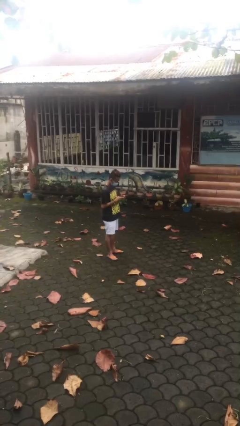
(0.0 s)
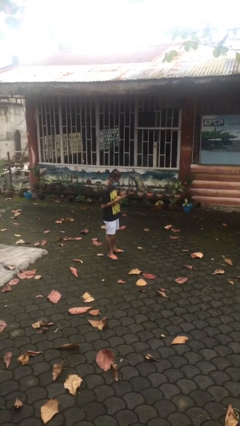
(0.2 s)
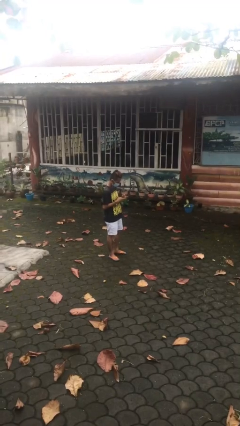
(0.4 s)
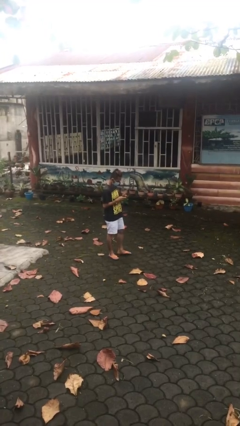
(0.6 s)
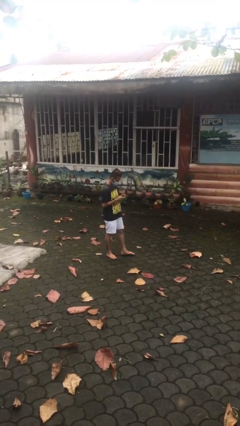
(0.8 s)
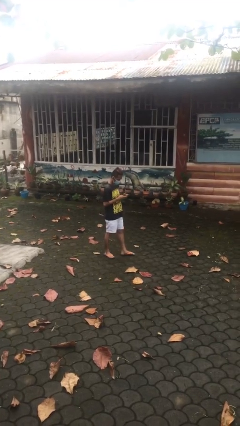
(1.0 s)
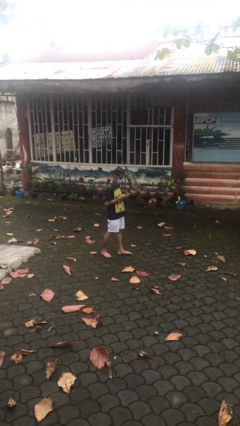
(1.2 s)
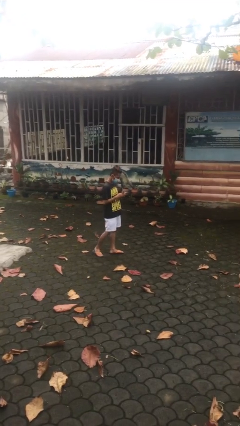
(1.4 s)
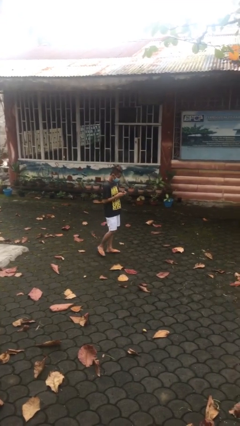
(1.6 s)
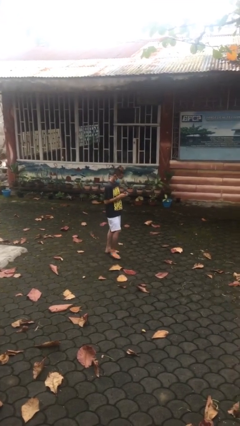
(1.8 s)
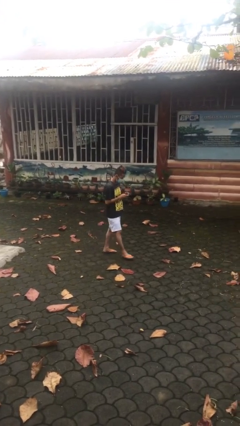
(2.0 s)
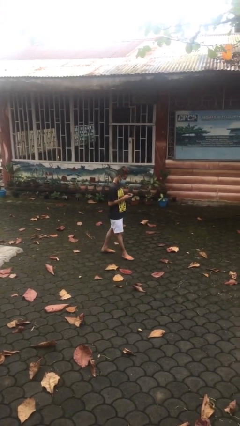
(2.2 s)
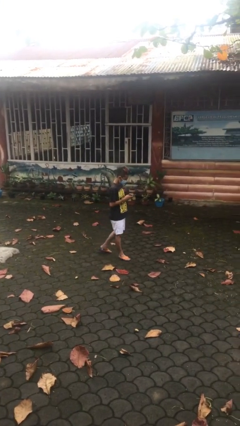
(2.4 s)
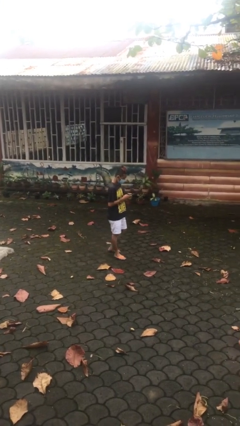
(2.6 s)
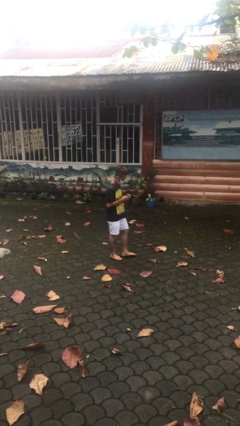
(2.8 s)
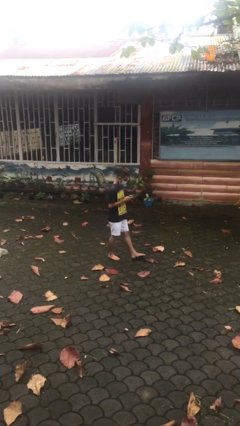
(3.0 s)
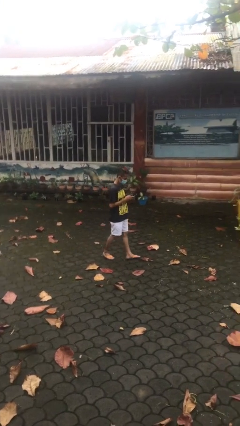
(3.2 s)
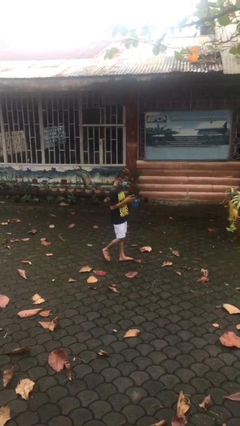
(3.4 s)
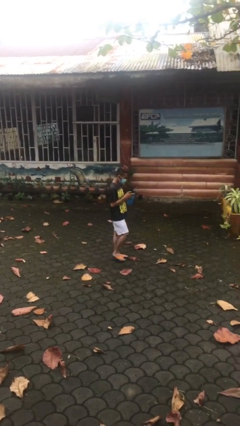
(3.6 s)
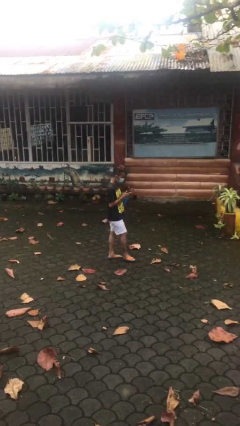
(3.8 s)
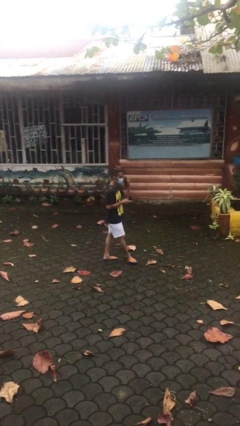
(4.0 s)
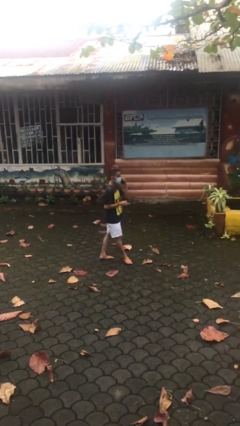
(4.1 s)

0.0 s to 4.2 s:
person texts on phone

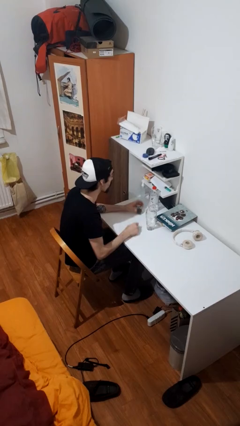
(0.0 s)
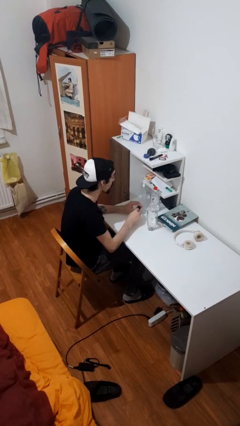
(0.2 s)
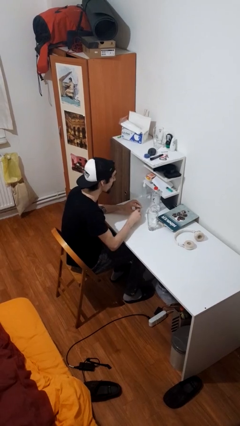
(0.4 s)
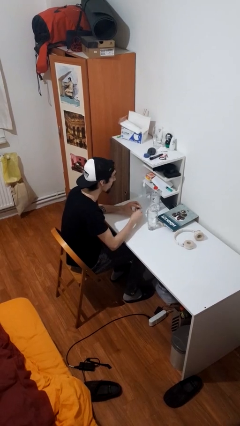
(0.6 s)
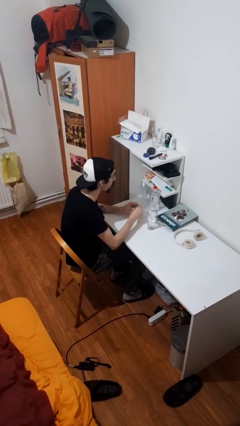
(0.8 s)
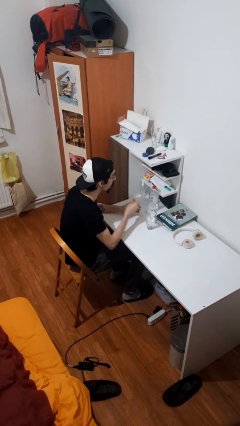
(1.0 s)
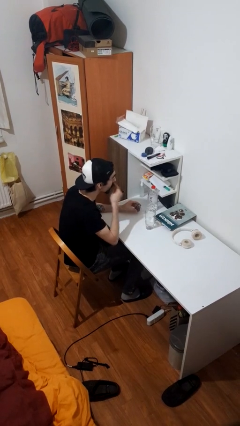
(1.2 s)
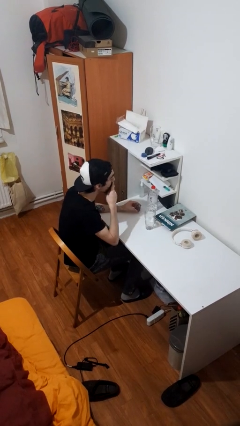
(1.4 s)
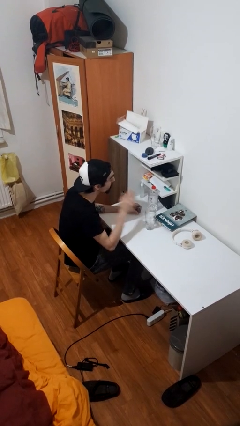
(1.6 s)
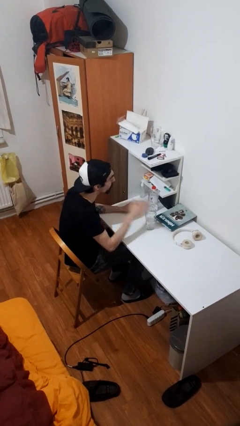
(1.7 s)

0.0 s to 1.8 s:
person takes medicine pills

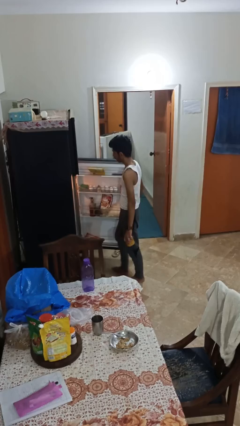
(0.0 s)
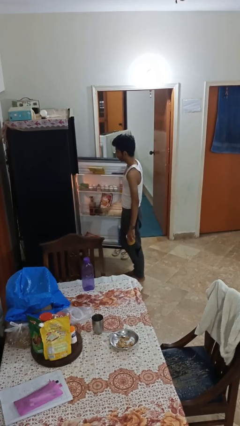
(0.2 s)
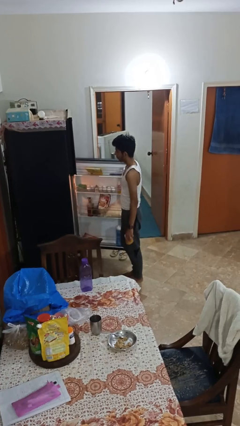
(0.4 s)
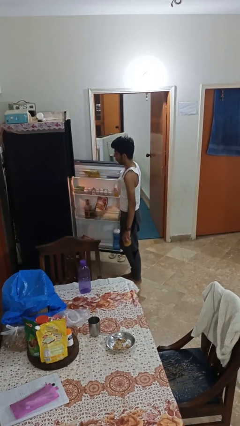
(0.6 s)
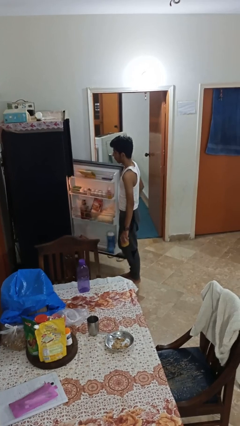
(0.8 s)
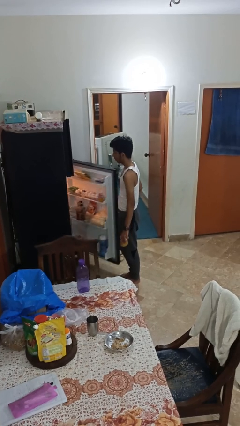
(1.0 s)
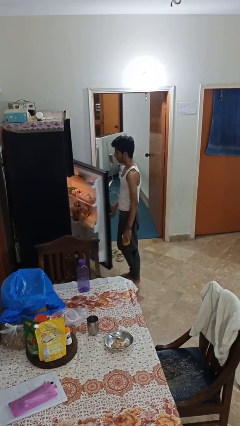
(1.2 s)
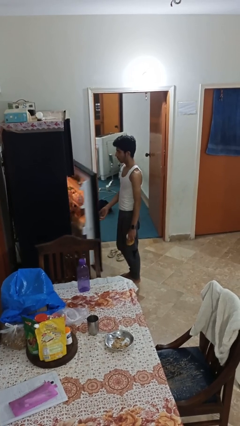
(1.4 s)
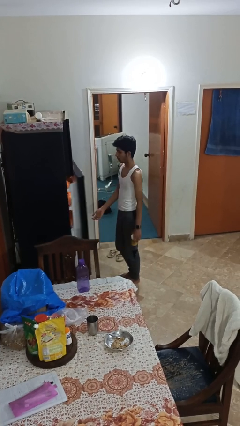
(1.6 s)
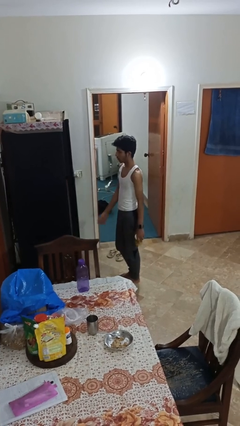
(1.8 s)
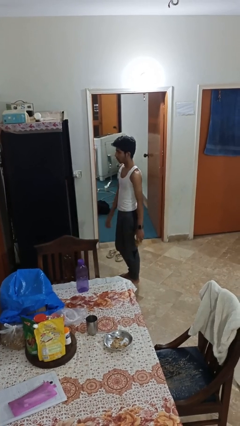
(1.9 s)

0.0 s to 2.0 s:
person closes refrigerator

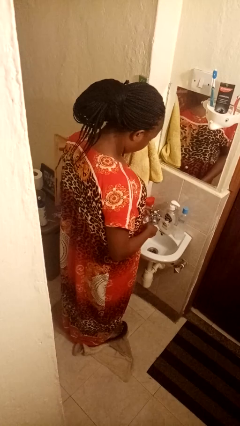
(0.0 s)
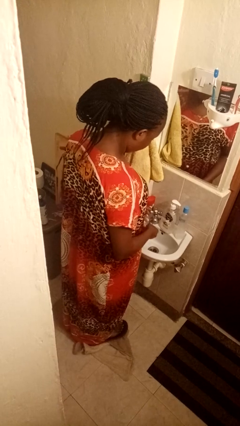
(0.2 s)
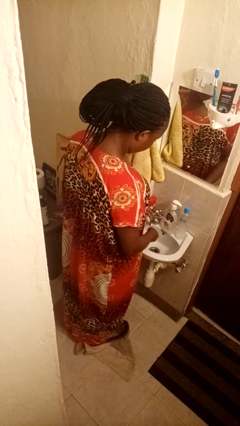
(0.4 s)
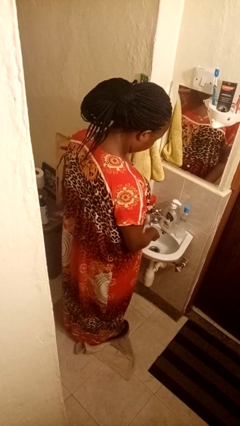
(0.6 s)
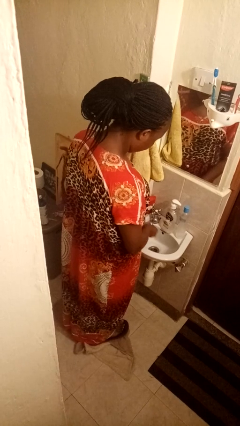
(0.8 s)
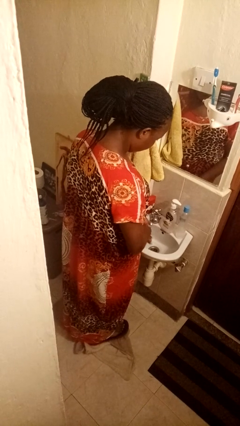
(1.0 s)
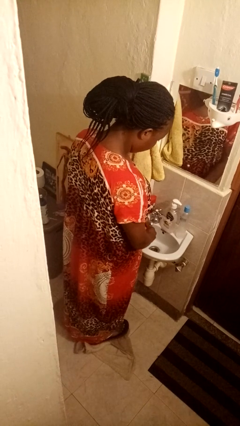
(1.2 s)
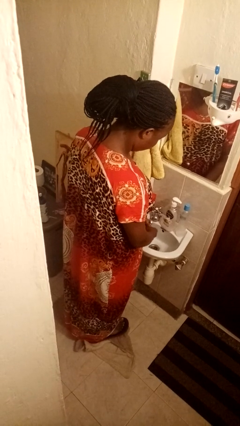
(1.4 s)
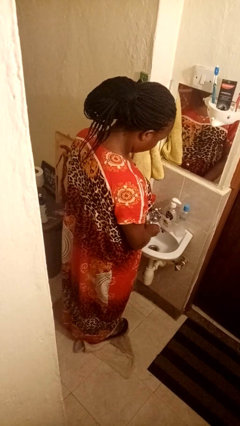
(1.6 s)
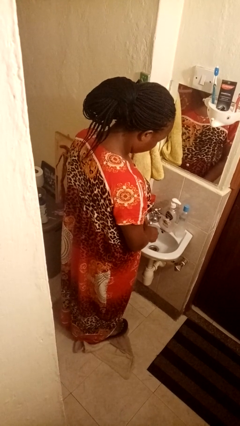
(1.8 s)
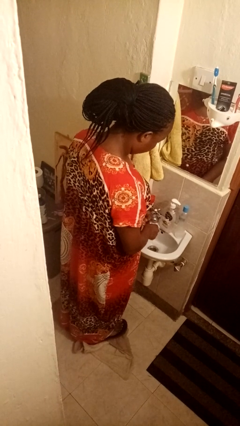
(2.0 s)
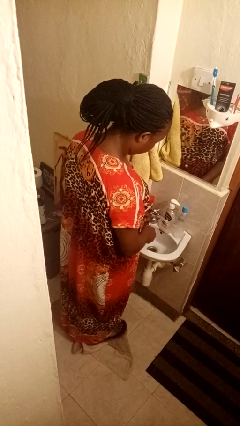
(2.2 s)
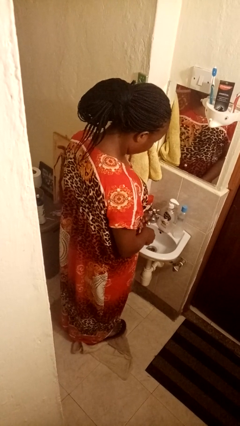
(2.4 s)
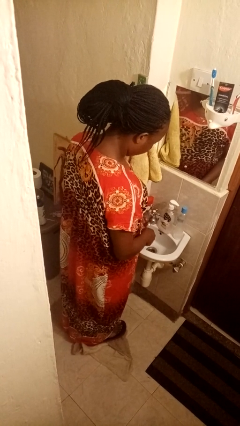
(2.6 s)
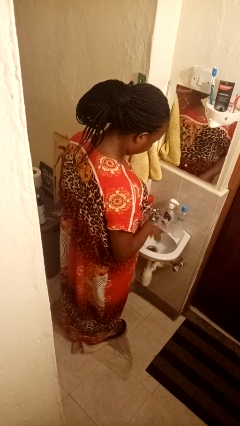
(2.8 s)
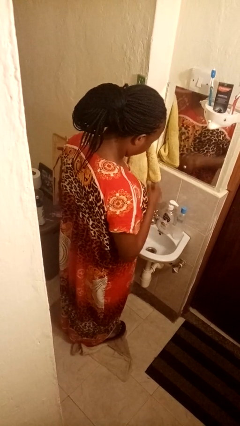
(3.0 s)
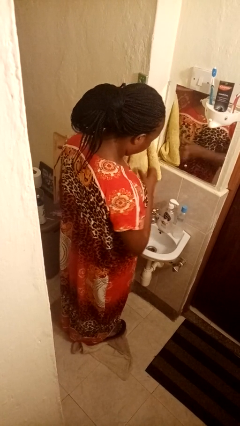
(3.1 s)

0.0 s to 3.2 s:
person washes hands

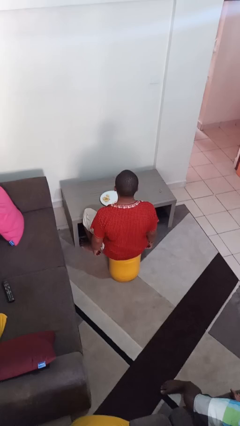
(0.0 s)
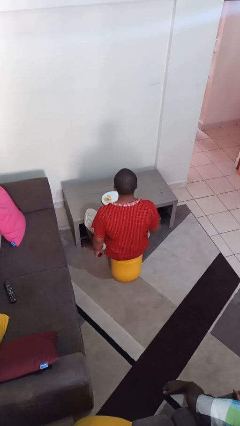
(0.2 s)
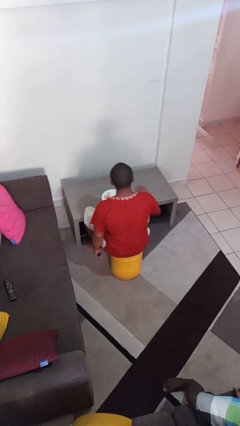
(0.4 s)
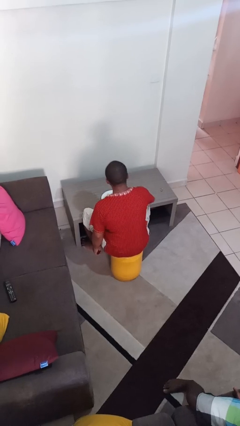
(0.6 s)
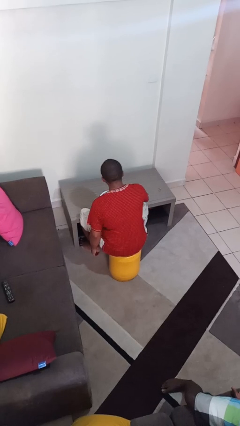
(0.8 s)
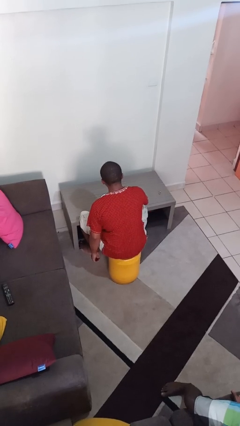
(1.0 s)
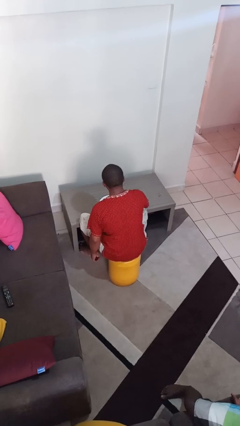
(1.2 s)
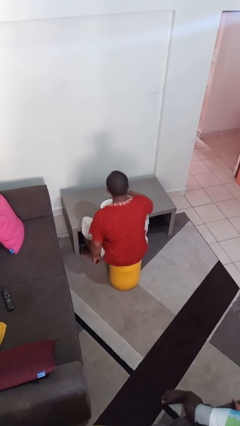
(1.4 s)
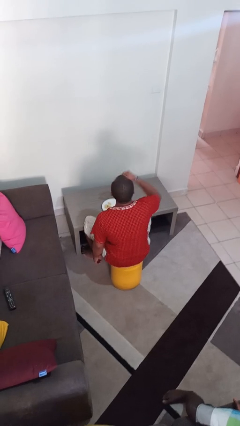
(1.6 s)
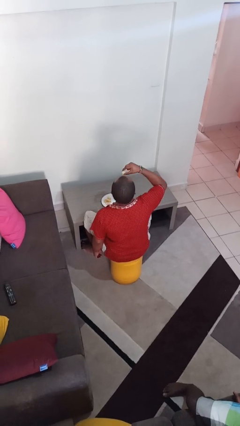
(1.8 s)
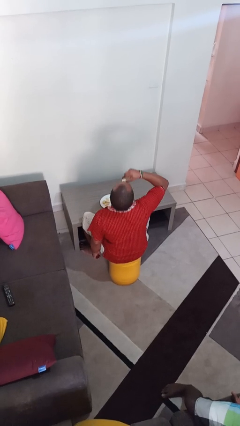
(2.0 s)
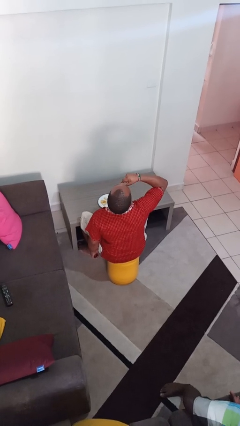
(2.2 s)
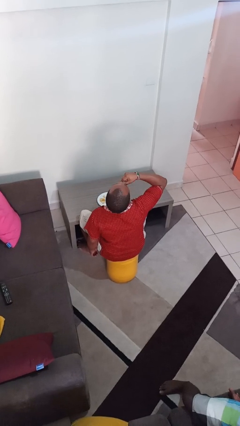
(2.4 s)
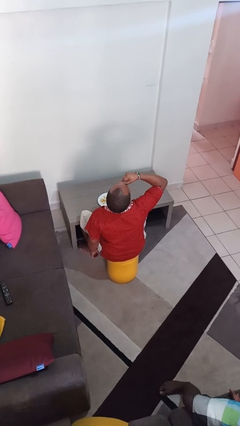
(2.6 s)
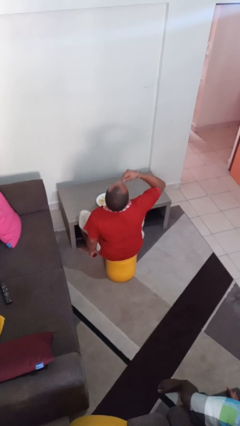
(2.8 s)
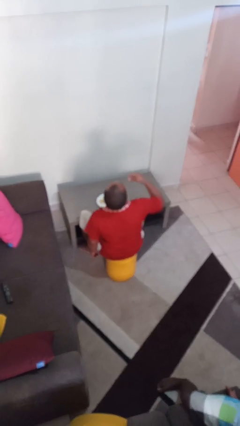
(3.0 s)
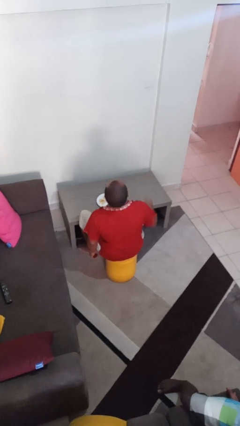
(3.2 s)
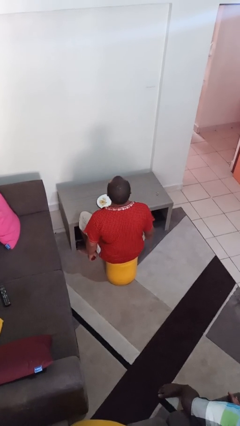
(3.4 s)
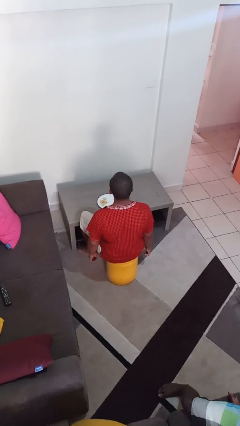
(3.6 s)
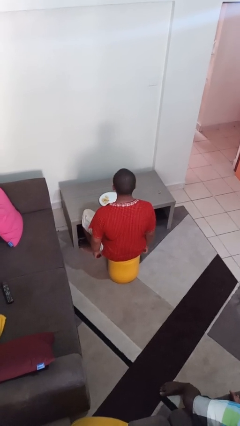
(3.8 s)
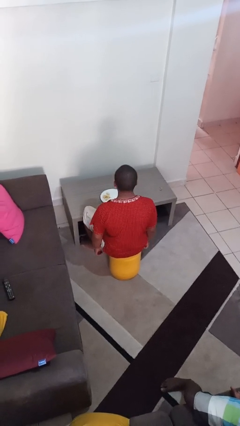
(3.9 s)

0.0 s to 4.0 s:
person eats with hands

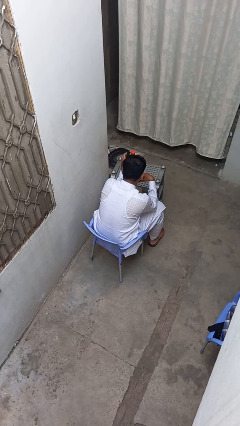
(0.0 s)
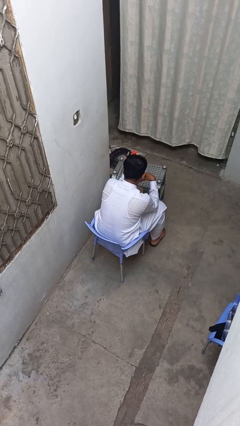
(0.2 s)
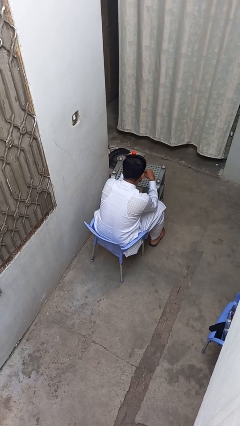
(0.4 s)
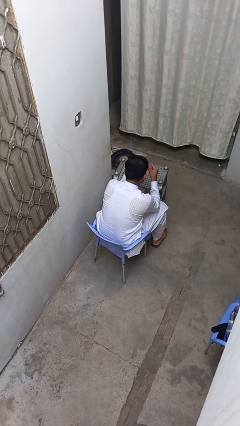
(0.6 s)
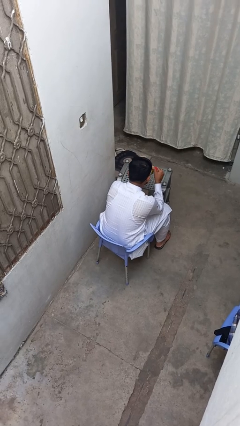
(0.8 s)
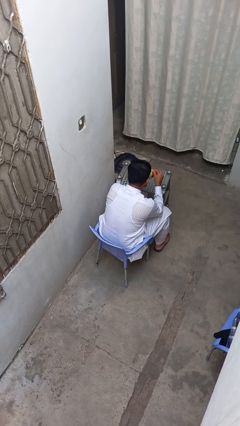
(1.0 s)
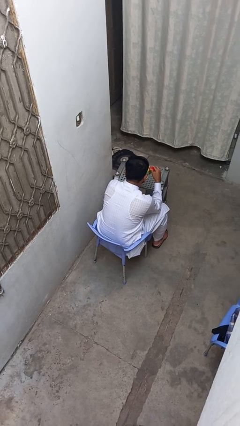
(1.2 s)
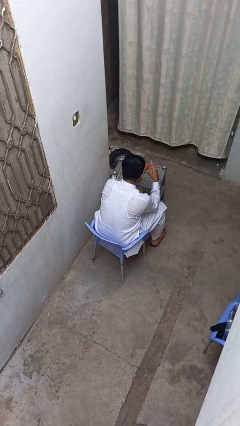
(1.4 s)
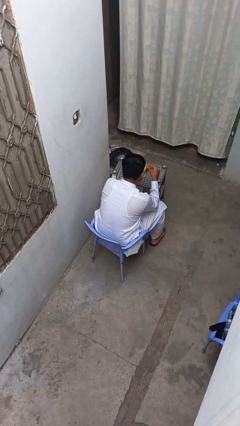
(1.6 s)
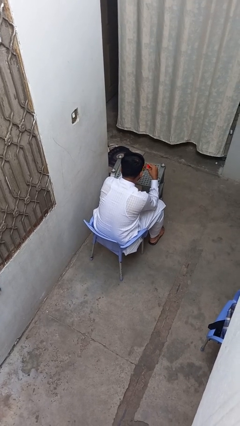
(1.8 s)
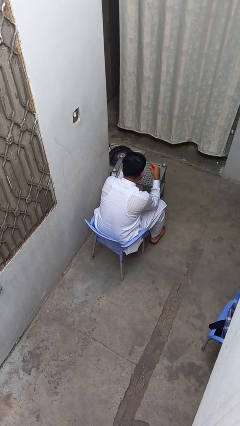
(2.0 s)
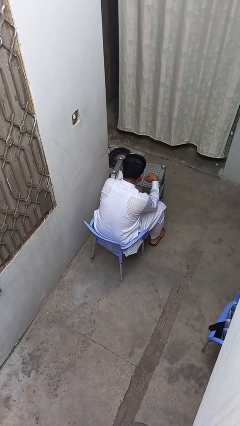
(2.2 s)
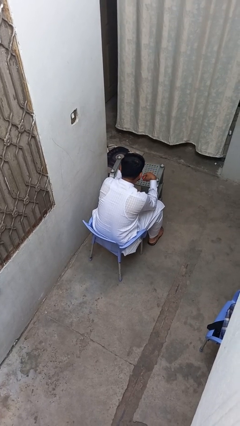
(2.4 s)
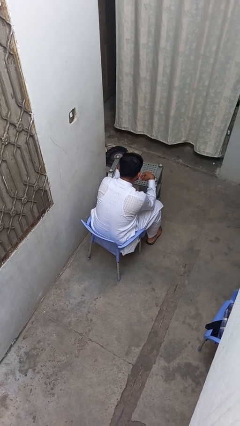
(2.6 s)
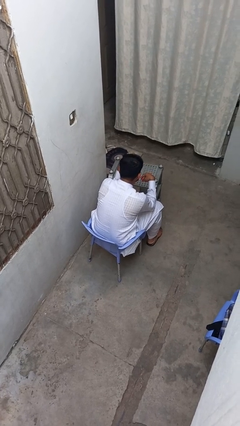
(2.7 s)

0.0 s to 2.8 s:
person unscrews lid from bottle
